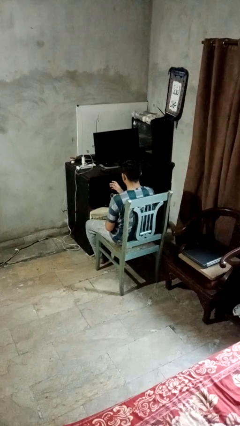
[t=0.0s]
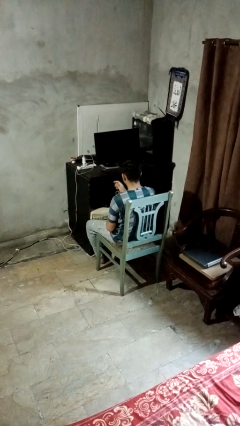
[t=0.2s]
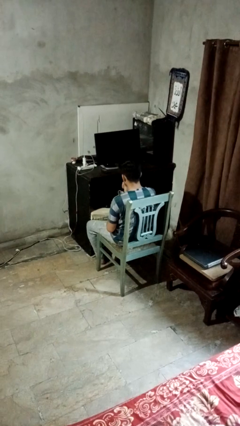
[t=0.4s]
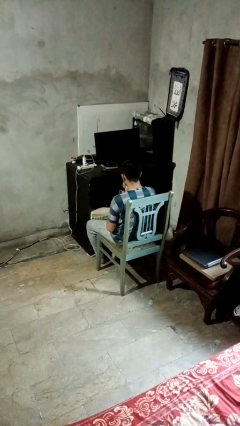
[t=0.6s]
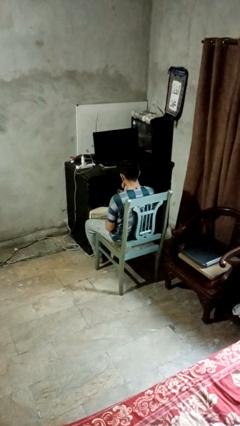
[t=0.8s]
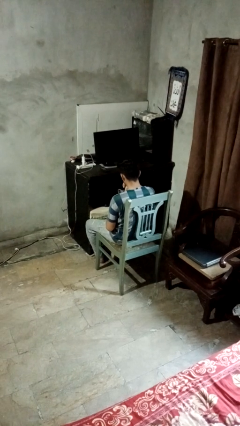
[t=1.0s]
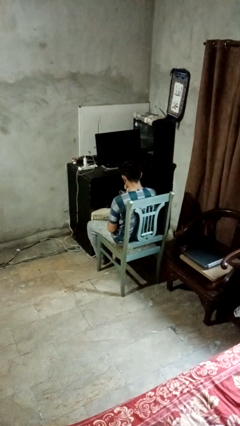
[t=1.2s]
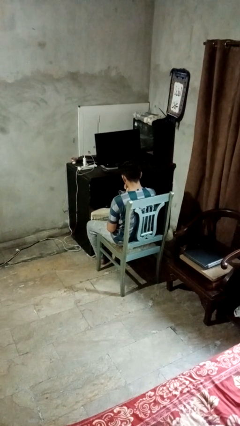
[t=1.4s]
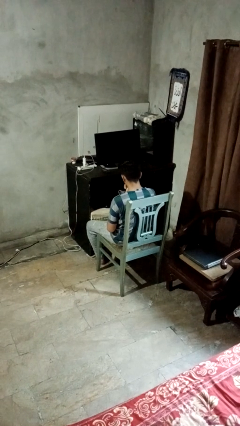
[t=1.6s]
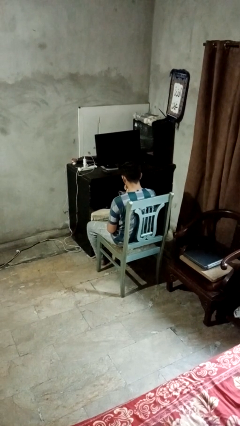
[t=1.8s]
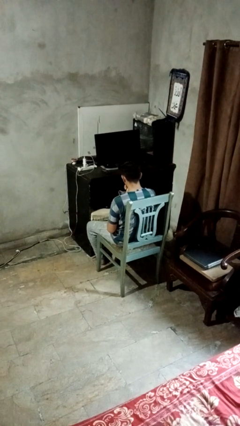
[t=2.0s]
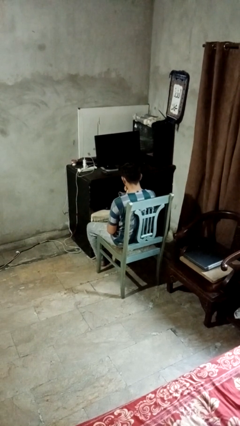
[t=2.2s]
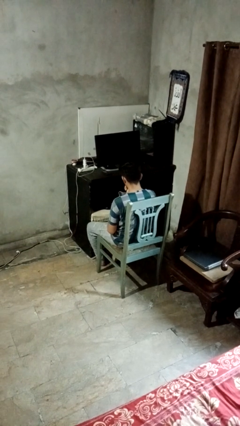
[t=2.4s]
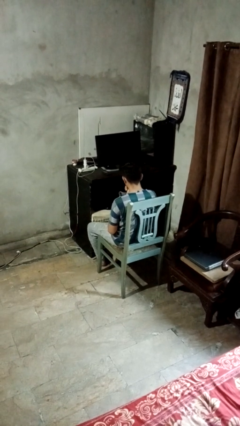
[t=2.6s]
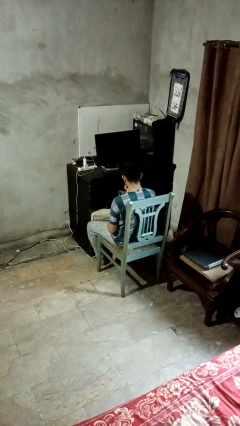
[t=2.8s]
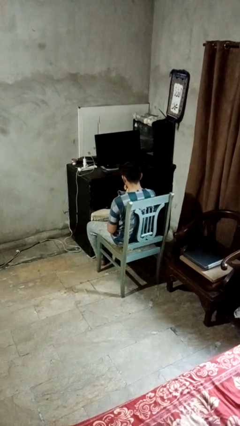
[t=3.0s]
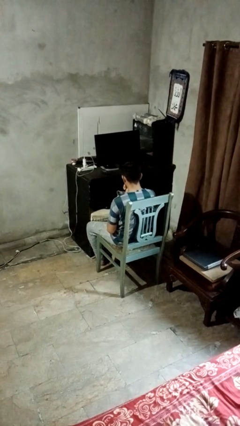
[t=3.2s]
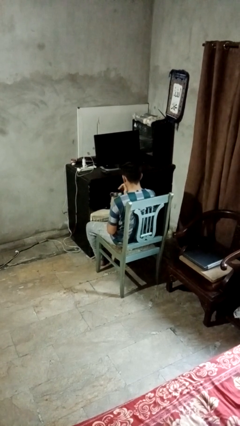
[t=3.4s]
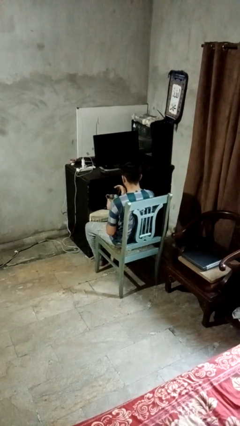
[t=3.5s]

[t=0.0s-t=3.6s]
person drinks from straw

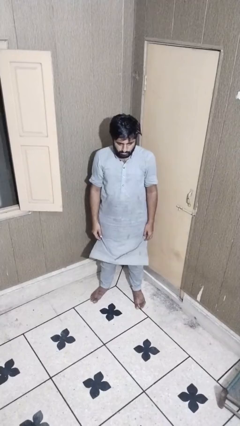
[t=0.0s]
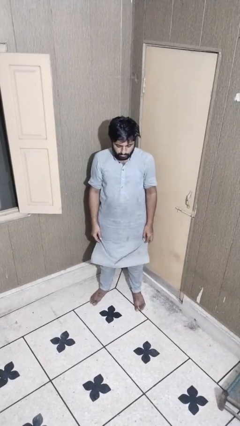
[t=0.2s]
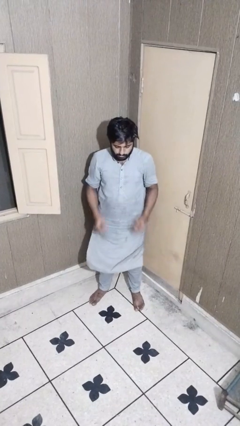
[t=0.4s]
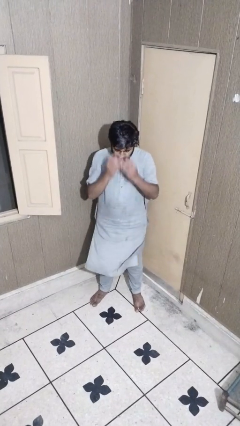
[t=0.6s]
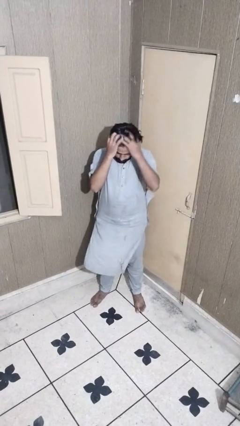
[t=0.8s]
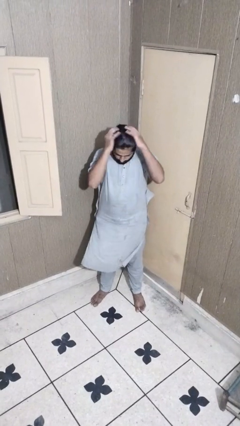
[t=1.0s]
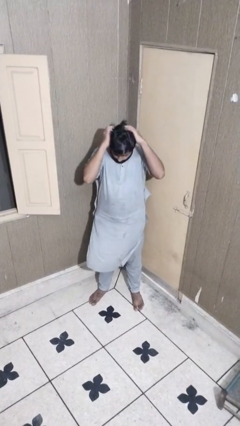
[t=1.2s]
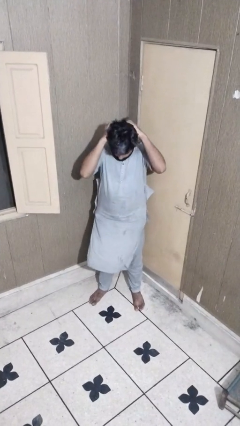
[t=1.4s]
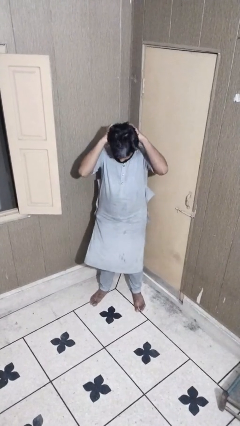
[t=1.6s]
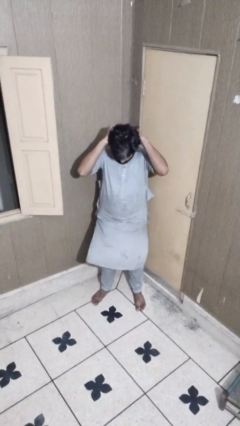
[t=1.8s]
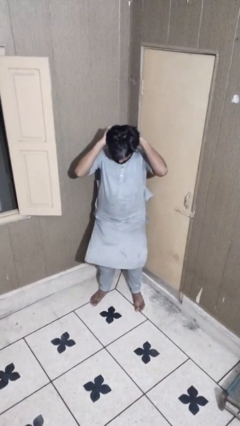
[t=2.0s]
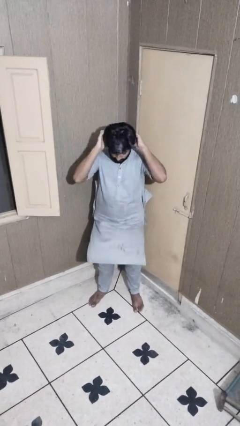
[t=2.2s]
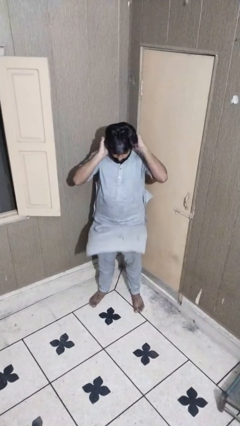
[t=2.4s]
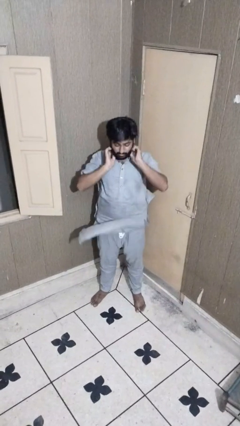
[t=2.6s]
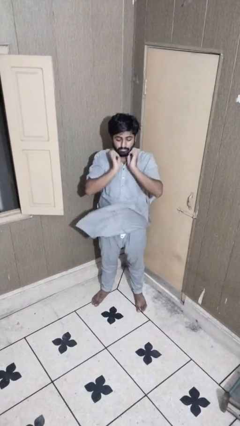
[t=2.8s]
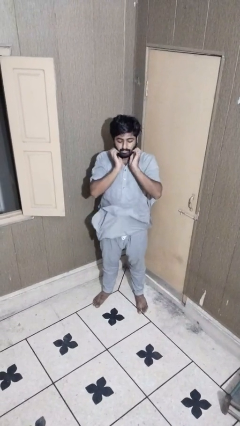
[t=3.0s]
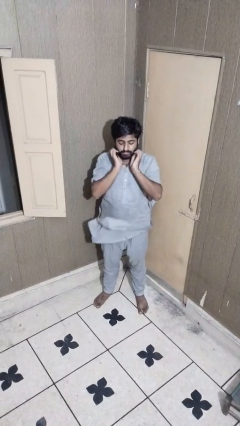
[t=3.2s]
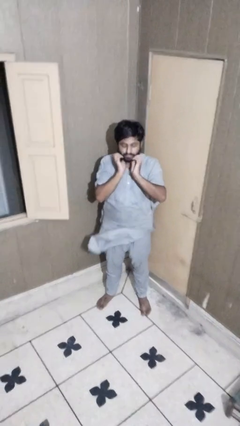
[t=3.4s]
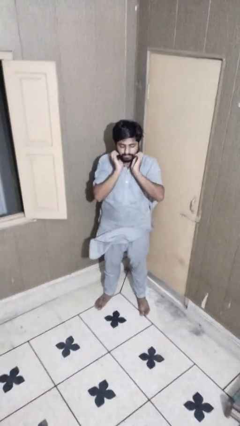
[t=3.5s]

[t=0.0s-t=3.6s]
person scratches face

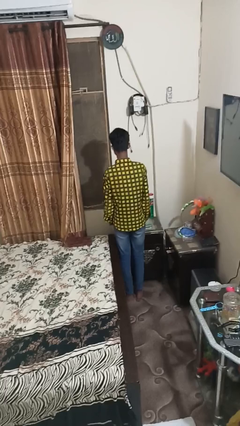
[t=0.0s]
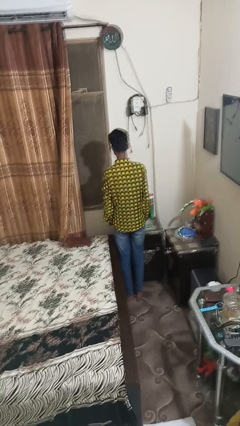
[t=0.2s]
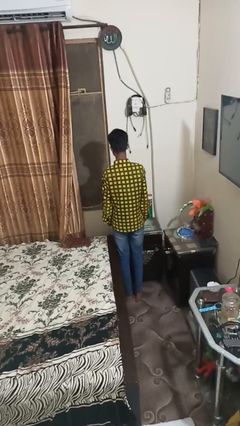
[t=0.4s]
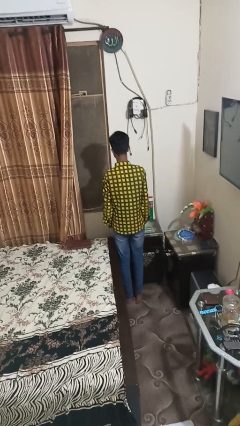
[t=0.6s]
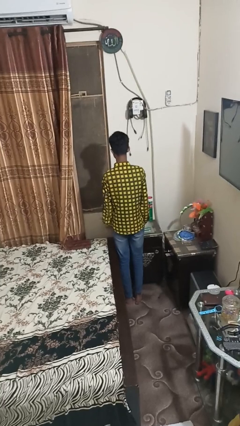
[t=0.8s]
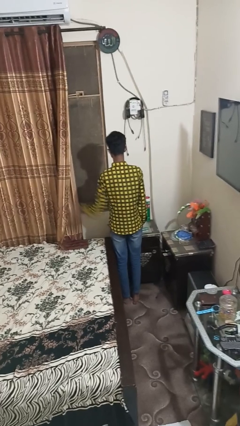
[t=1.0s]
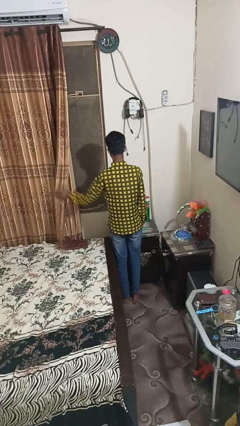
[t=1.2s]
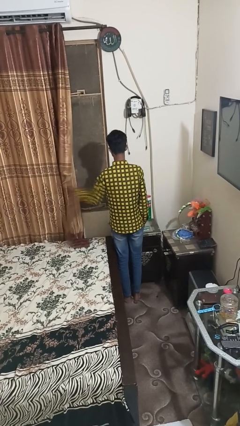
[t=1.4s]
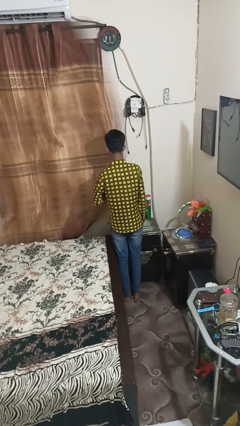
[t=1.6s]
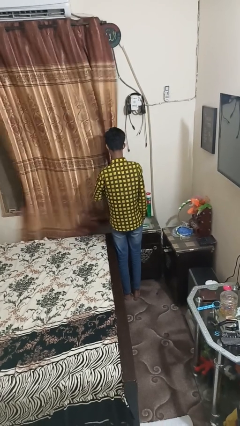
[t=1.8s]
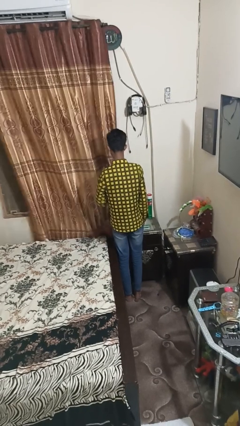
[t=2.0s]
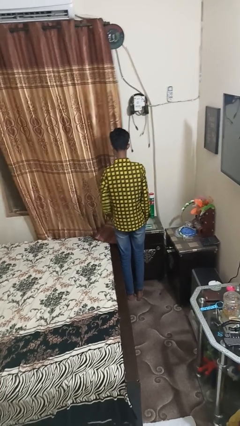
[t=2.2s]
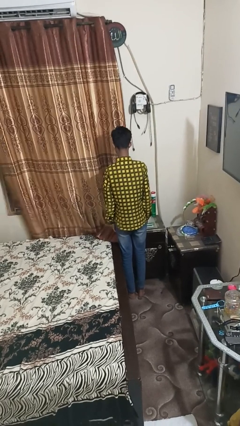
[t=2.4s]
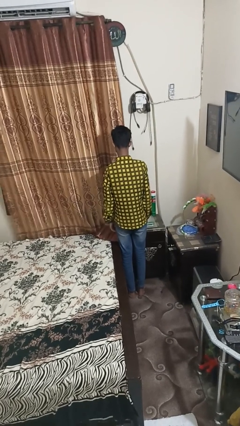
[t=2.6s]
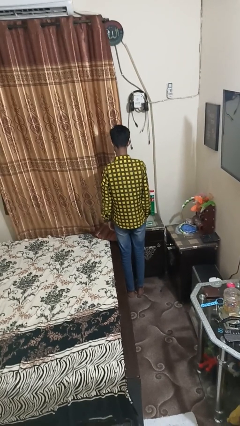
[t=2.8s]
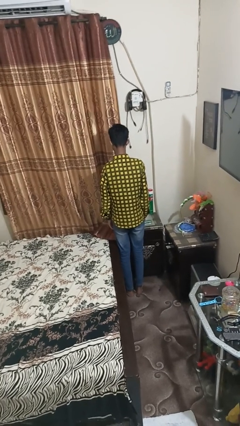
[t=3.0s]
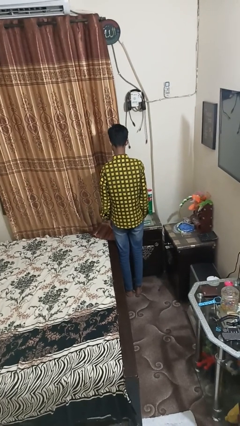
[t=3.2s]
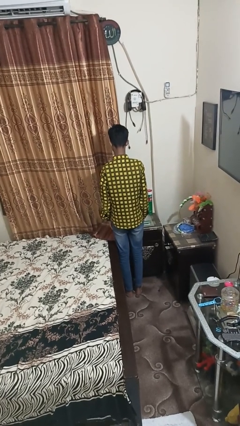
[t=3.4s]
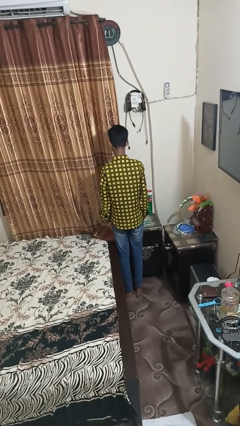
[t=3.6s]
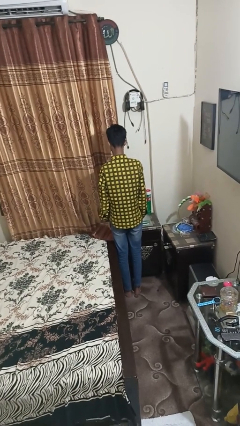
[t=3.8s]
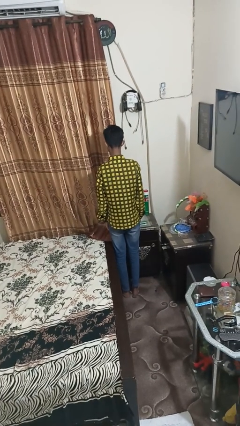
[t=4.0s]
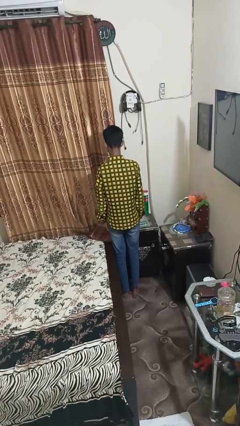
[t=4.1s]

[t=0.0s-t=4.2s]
person closes curtains

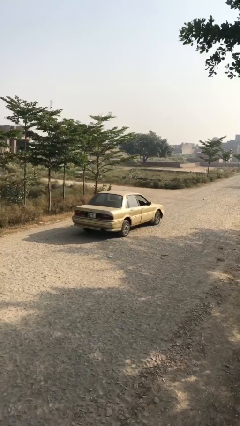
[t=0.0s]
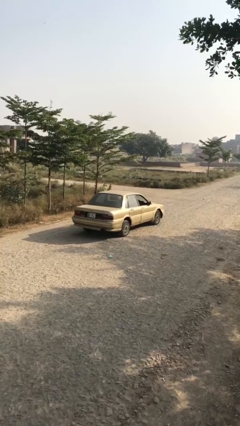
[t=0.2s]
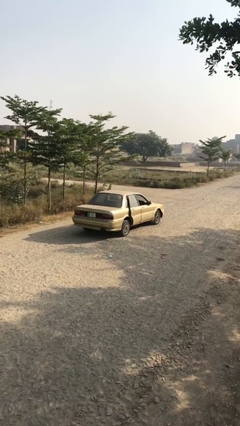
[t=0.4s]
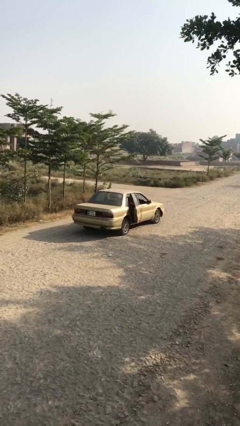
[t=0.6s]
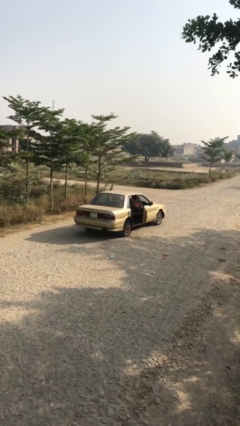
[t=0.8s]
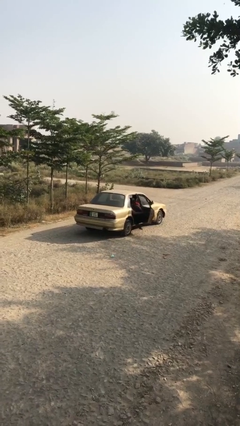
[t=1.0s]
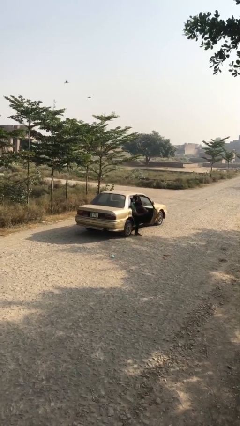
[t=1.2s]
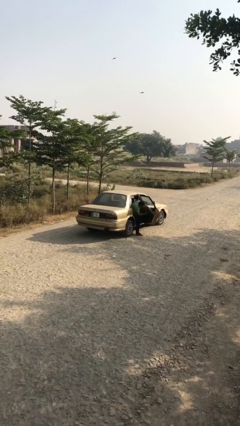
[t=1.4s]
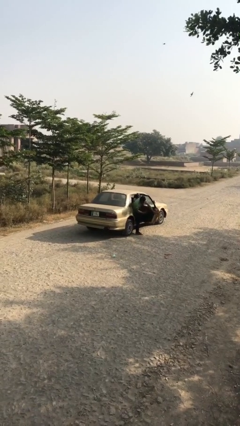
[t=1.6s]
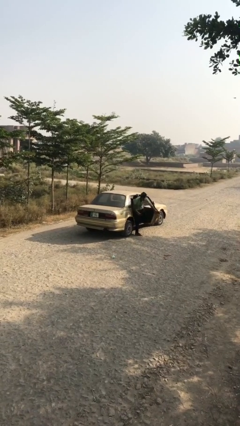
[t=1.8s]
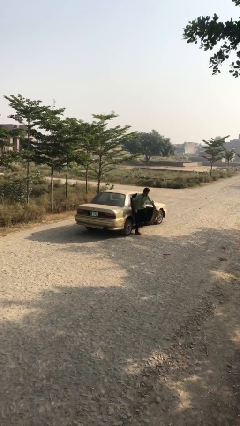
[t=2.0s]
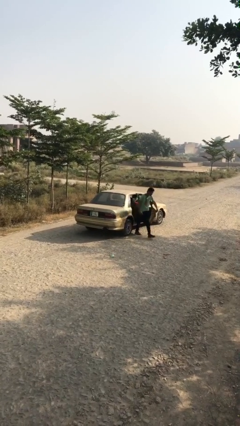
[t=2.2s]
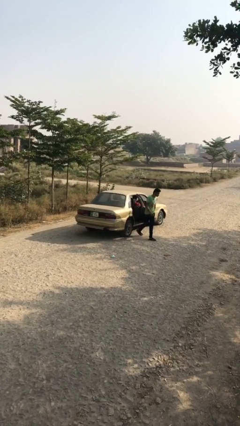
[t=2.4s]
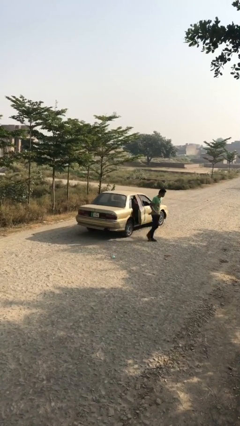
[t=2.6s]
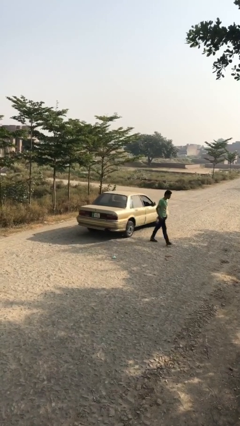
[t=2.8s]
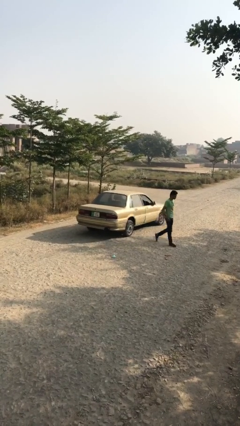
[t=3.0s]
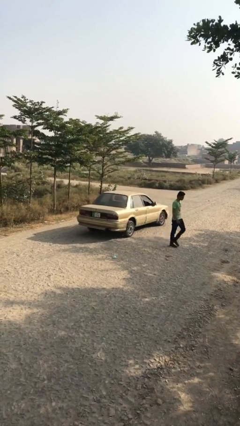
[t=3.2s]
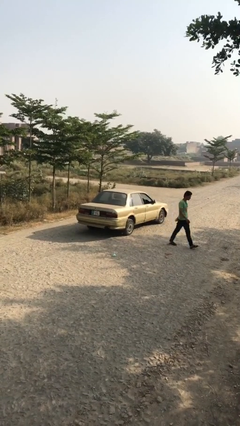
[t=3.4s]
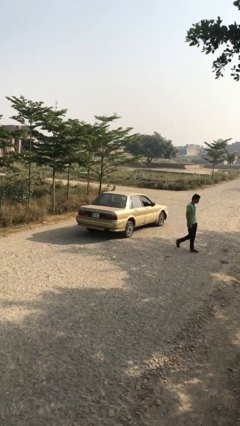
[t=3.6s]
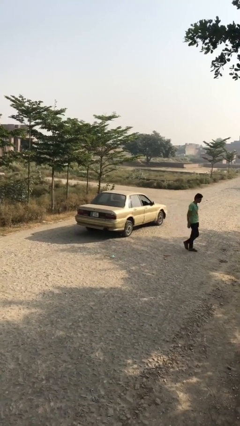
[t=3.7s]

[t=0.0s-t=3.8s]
car drops off person

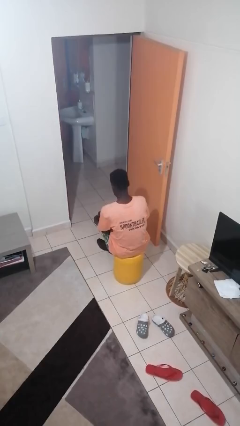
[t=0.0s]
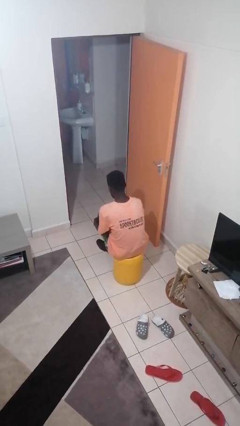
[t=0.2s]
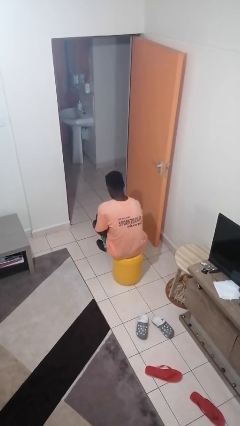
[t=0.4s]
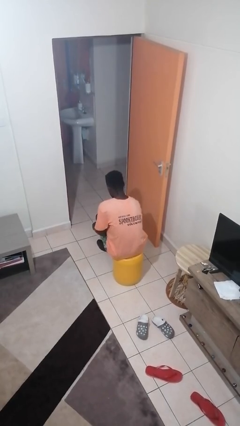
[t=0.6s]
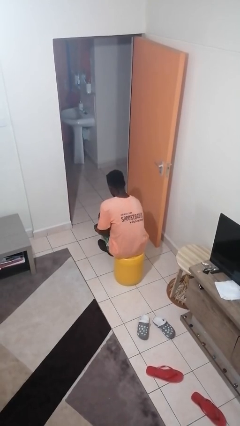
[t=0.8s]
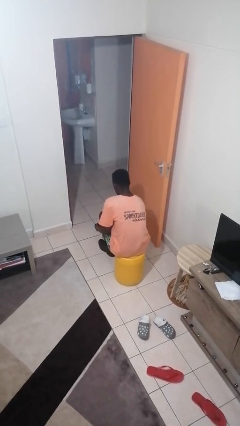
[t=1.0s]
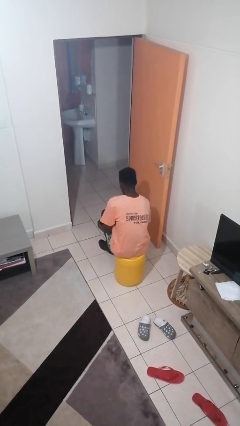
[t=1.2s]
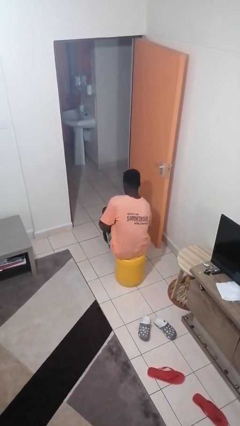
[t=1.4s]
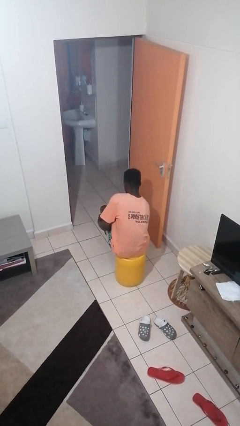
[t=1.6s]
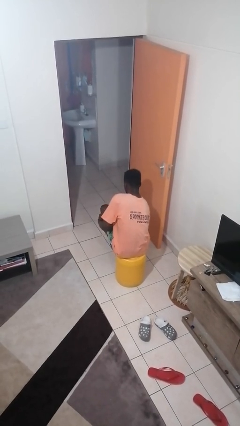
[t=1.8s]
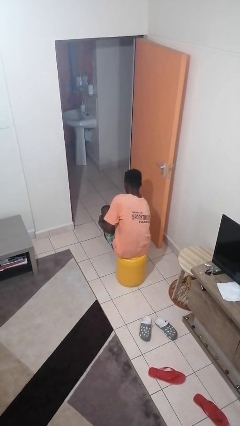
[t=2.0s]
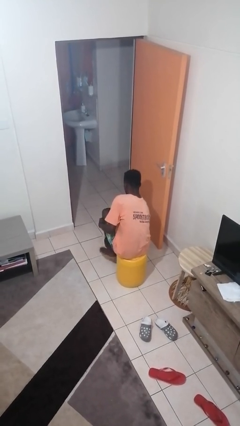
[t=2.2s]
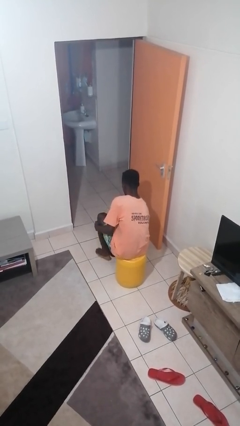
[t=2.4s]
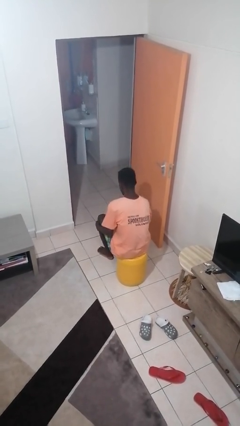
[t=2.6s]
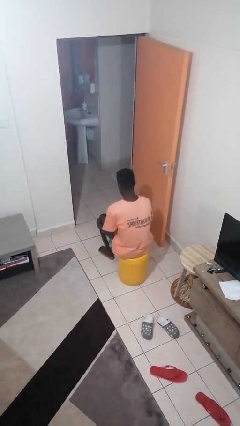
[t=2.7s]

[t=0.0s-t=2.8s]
person takes off shoes
